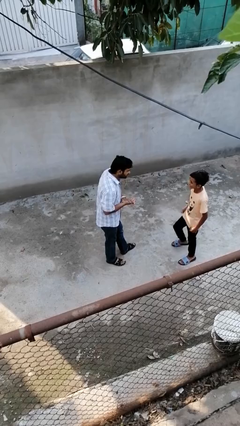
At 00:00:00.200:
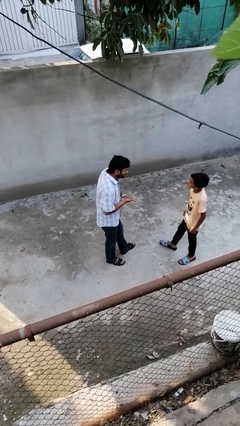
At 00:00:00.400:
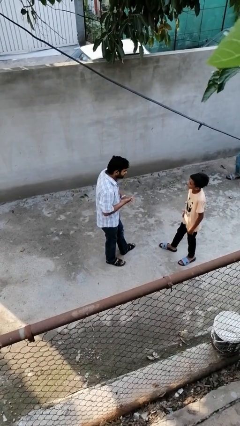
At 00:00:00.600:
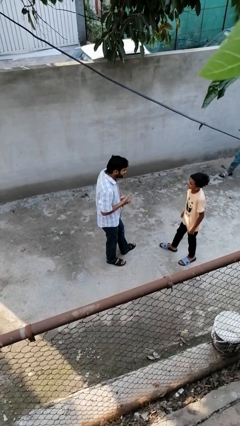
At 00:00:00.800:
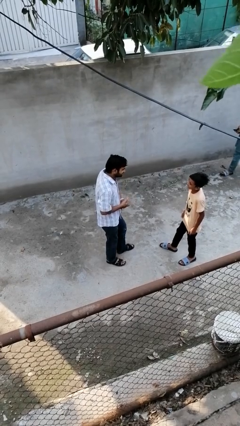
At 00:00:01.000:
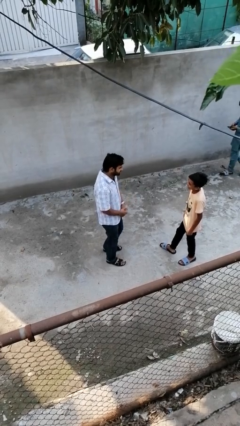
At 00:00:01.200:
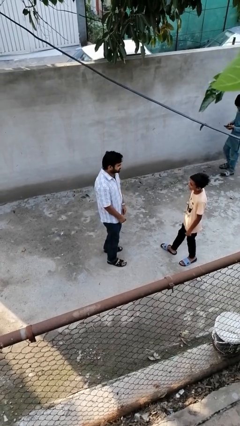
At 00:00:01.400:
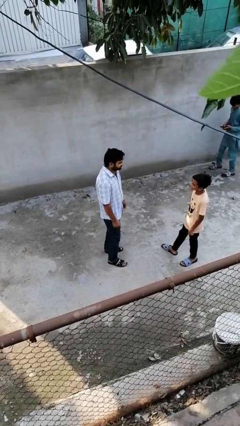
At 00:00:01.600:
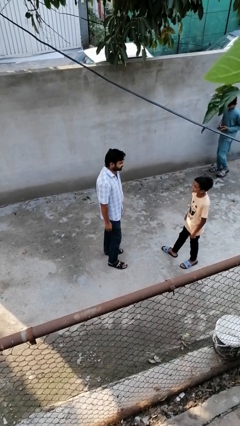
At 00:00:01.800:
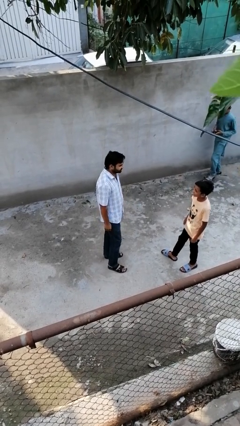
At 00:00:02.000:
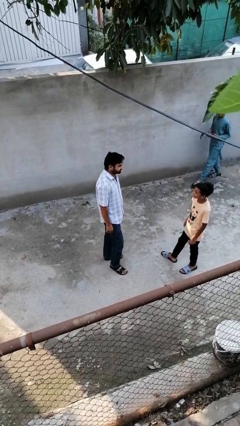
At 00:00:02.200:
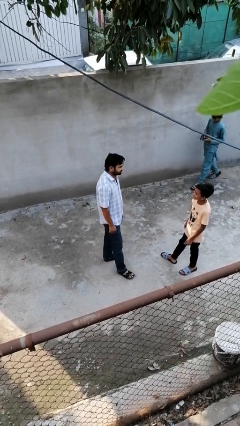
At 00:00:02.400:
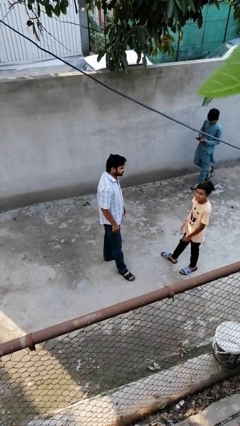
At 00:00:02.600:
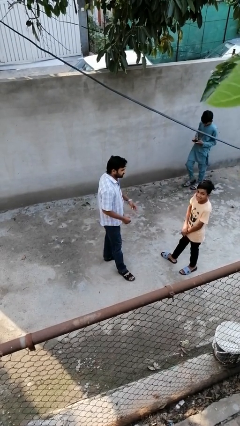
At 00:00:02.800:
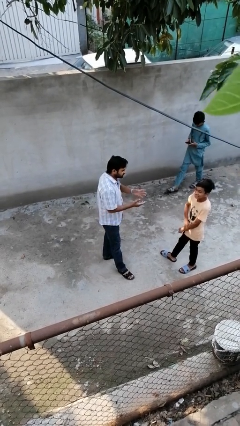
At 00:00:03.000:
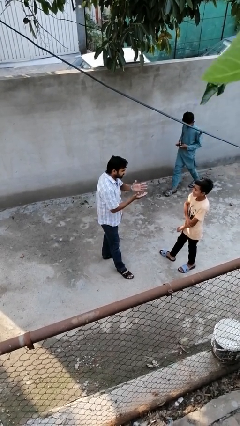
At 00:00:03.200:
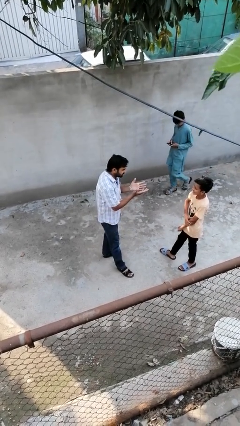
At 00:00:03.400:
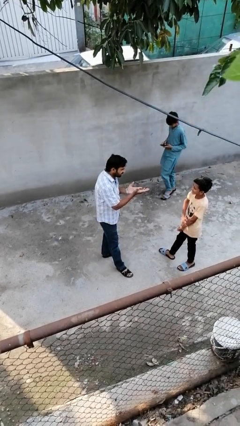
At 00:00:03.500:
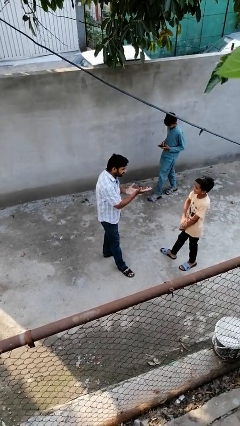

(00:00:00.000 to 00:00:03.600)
person talks to person

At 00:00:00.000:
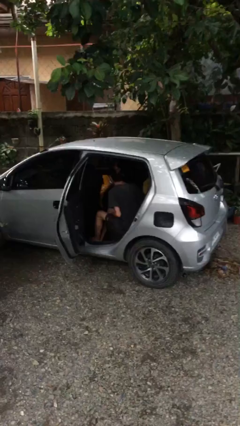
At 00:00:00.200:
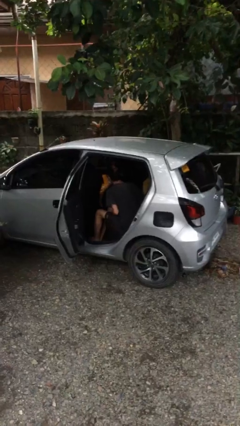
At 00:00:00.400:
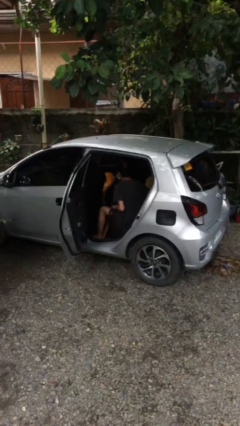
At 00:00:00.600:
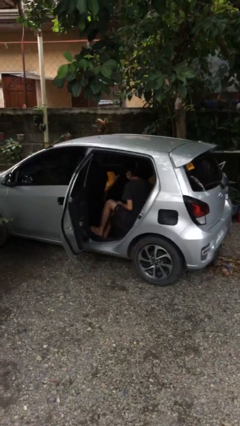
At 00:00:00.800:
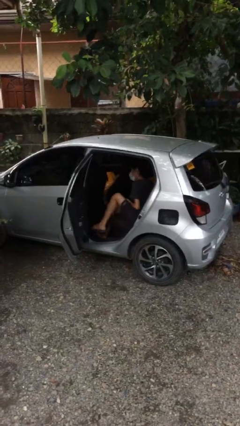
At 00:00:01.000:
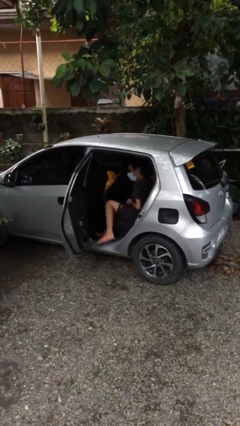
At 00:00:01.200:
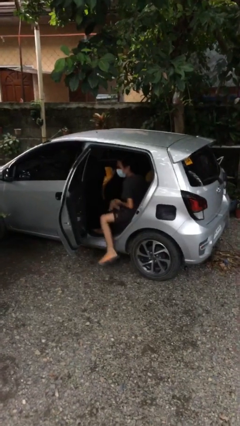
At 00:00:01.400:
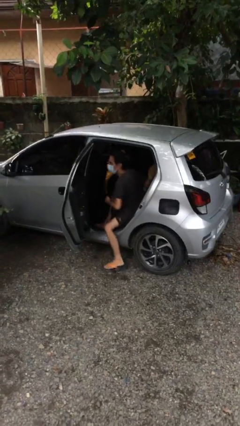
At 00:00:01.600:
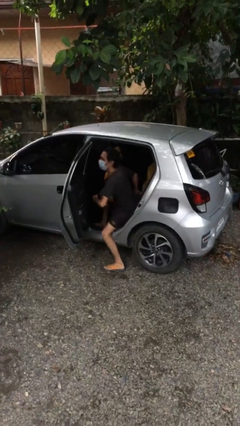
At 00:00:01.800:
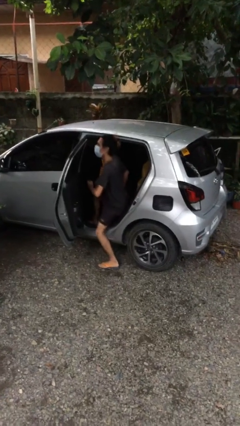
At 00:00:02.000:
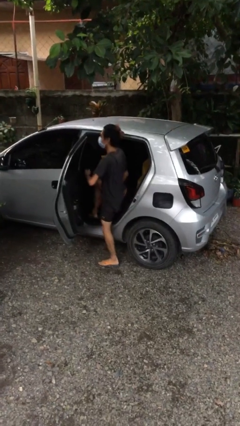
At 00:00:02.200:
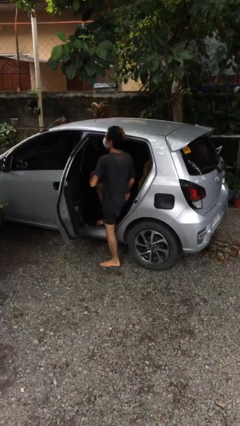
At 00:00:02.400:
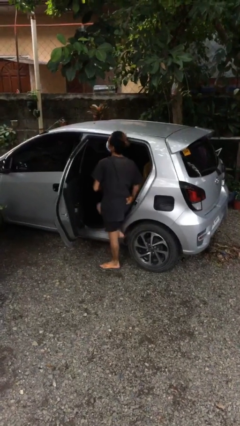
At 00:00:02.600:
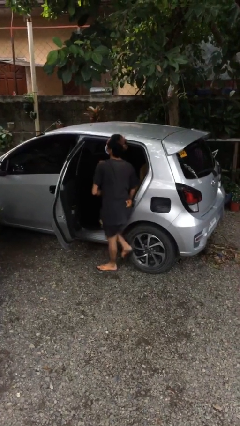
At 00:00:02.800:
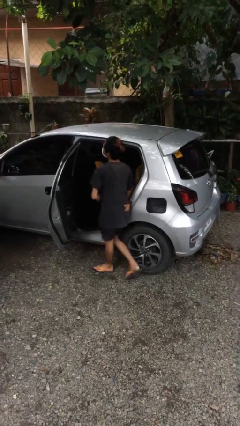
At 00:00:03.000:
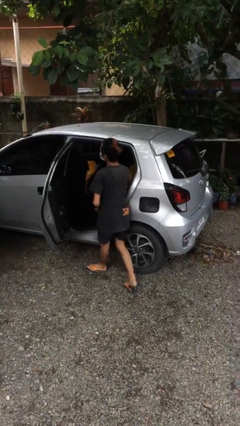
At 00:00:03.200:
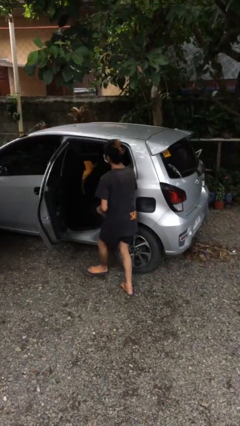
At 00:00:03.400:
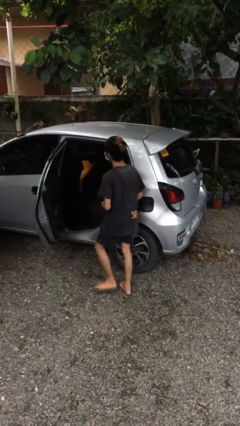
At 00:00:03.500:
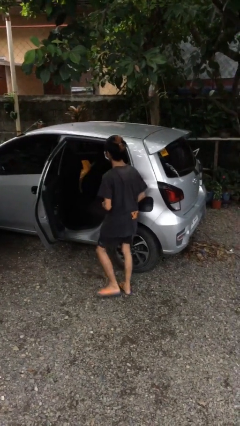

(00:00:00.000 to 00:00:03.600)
person exits car

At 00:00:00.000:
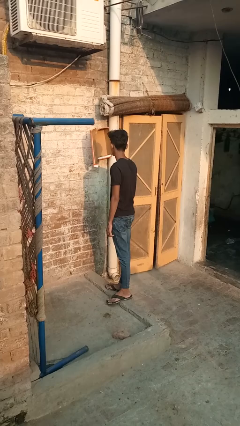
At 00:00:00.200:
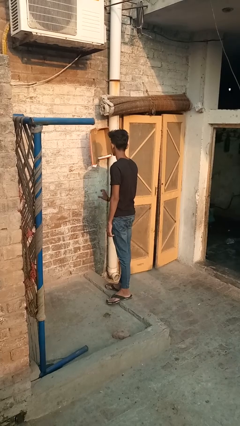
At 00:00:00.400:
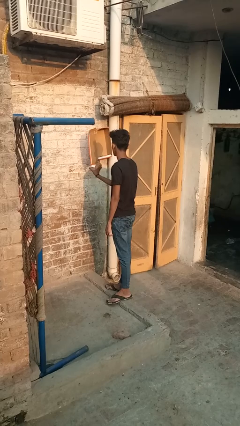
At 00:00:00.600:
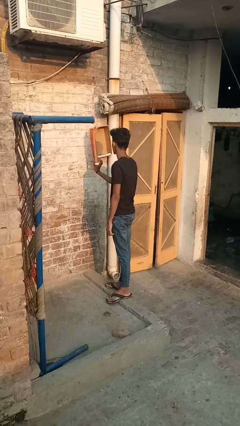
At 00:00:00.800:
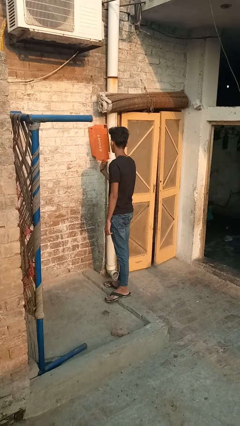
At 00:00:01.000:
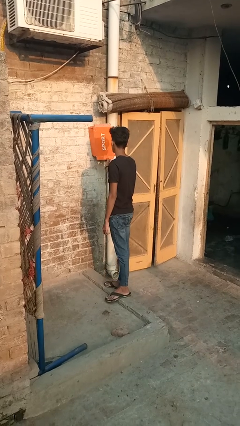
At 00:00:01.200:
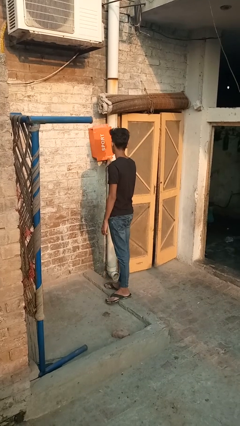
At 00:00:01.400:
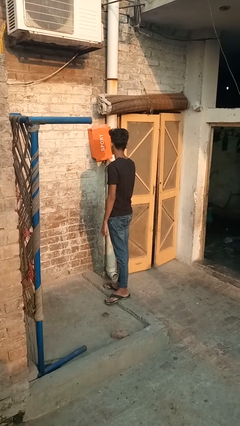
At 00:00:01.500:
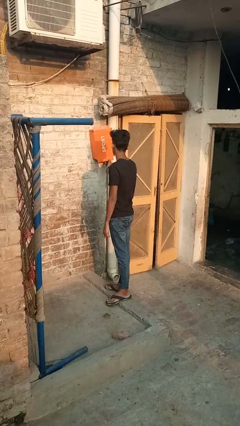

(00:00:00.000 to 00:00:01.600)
person opens mailbox

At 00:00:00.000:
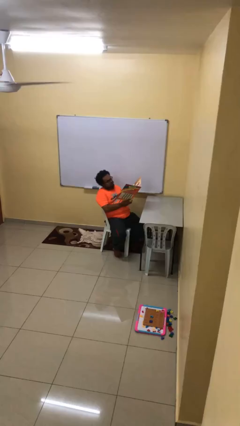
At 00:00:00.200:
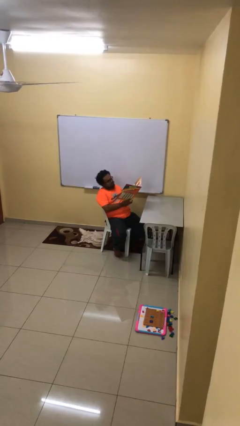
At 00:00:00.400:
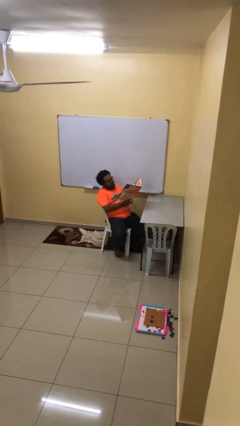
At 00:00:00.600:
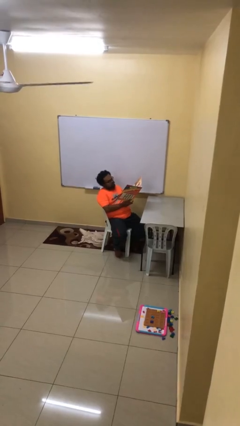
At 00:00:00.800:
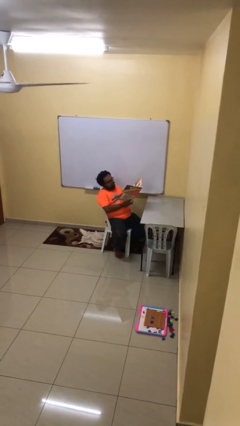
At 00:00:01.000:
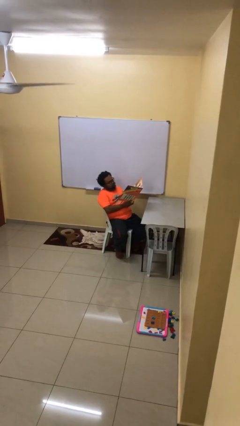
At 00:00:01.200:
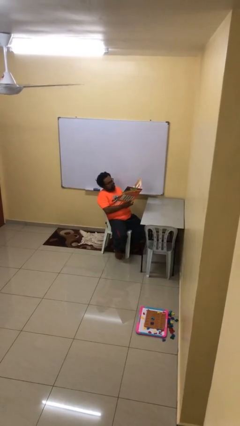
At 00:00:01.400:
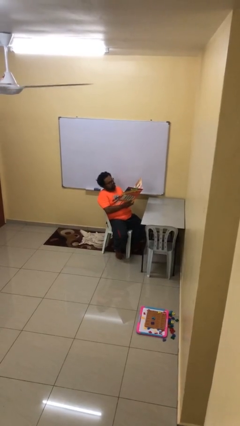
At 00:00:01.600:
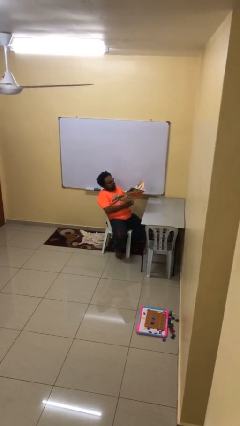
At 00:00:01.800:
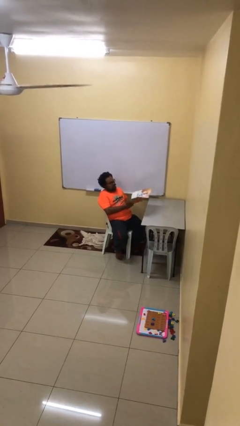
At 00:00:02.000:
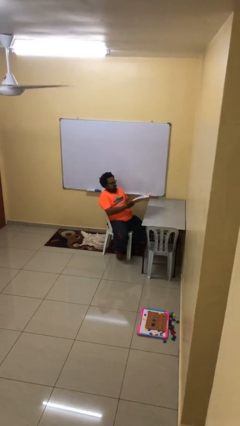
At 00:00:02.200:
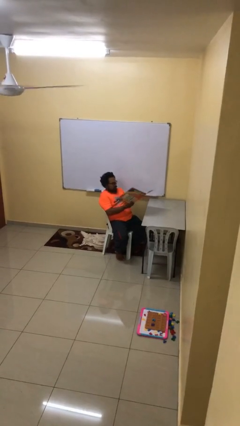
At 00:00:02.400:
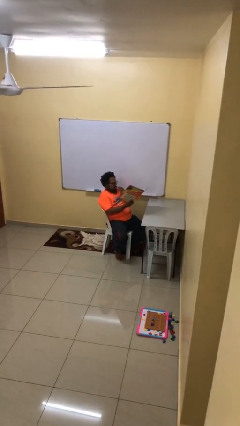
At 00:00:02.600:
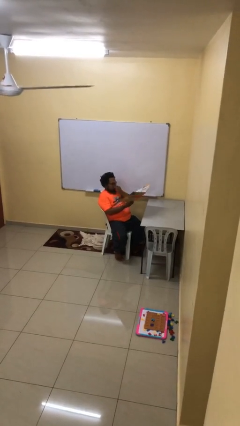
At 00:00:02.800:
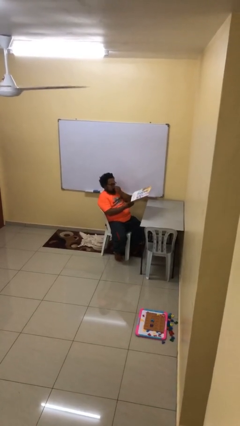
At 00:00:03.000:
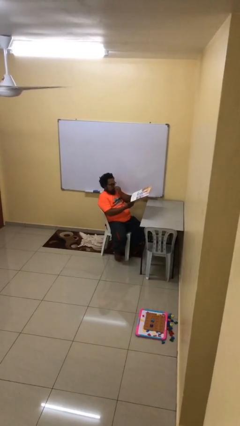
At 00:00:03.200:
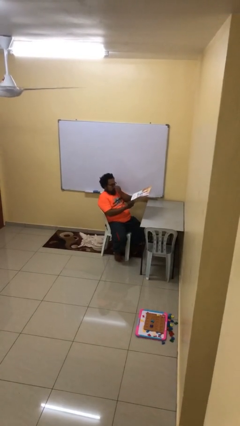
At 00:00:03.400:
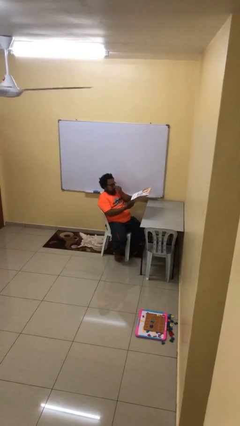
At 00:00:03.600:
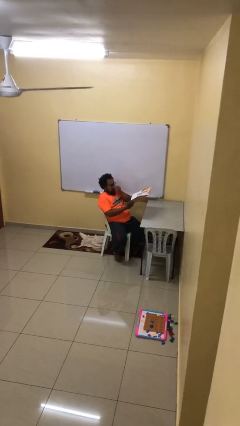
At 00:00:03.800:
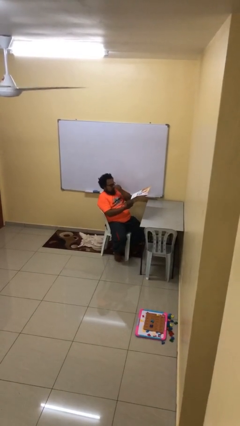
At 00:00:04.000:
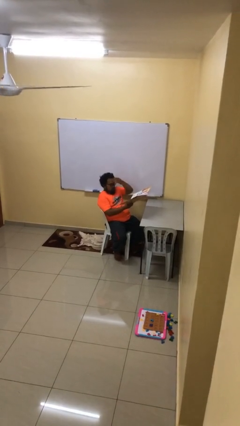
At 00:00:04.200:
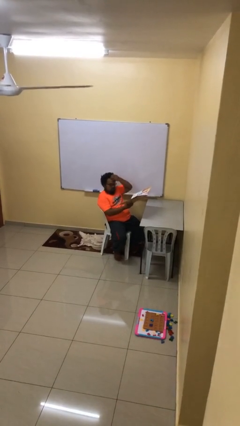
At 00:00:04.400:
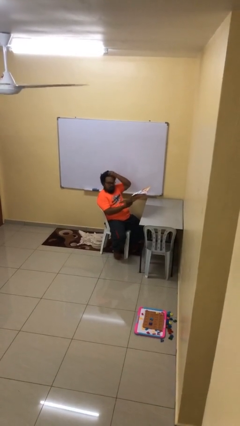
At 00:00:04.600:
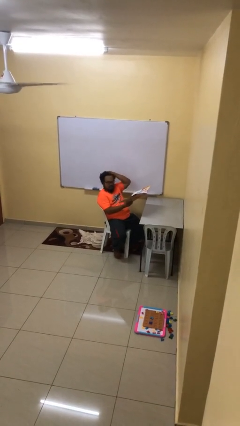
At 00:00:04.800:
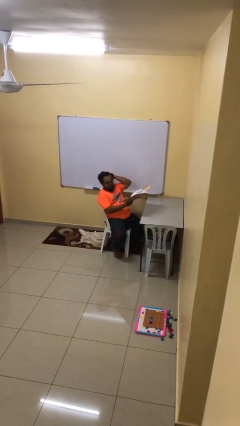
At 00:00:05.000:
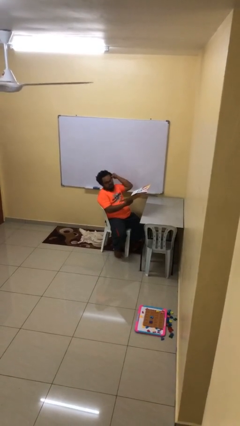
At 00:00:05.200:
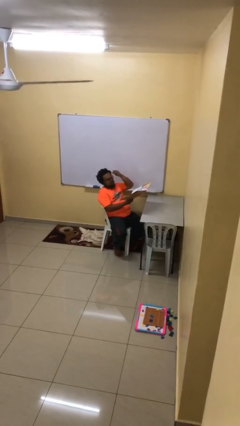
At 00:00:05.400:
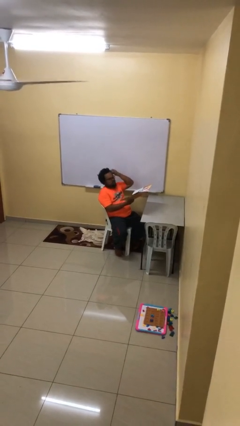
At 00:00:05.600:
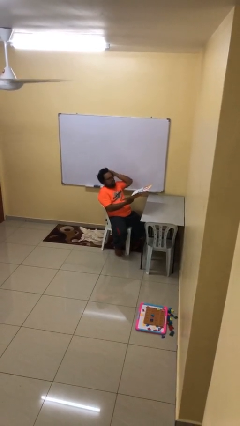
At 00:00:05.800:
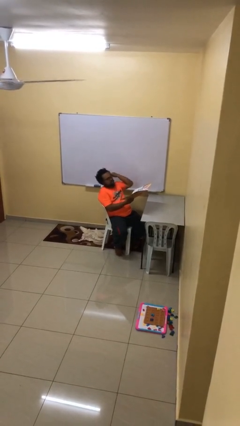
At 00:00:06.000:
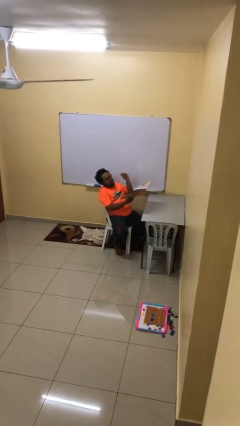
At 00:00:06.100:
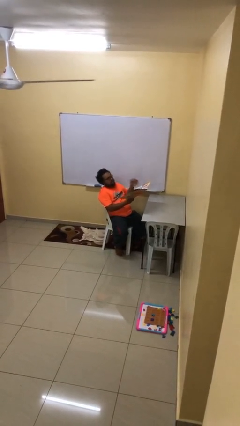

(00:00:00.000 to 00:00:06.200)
person reads document

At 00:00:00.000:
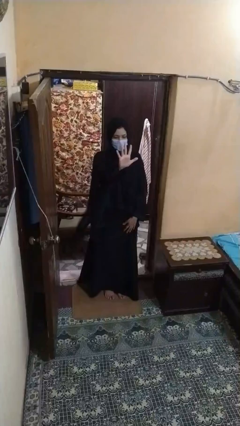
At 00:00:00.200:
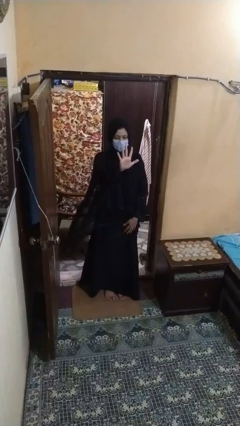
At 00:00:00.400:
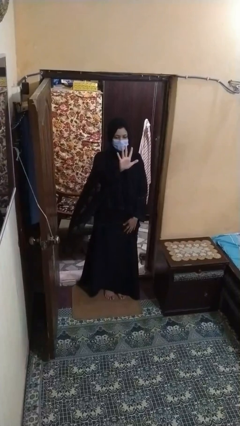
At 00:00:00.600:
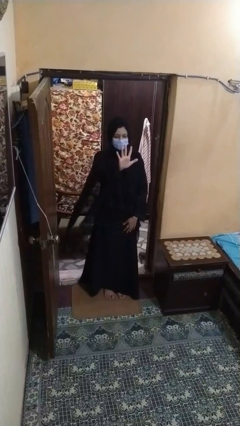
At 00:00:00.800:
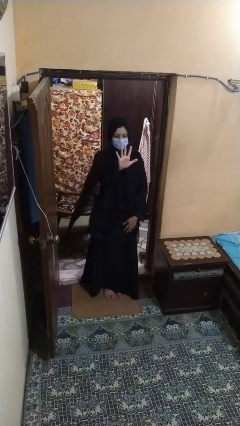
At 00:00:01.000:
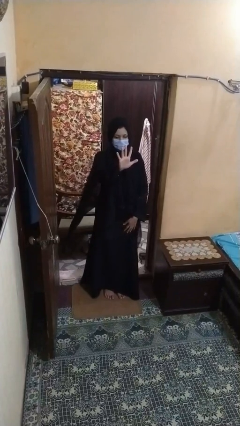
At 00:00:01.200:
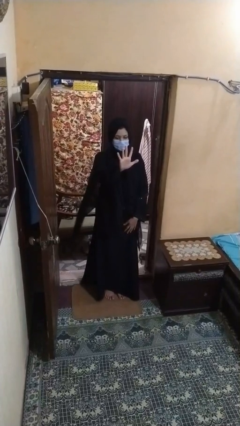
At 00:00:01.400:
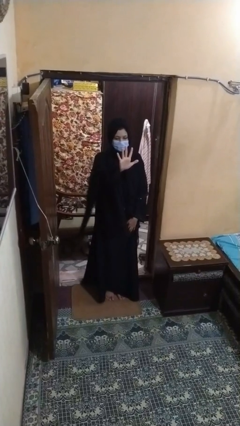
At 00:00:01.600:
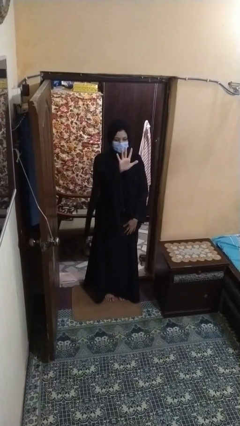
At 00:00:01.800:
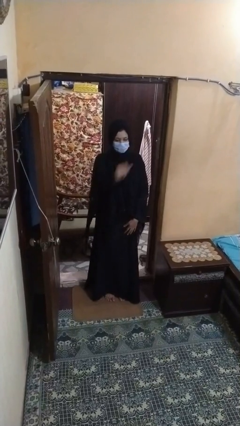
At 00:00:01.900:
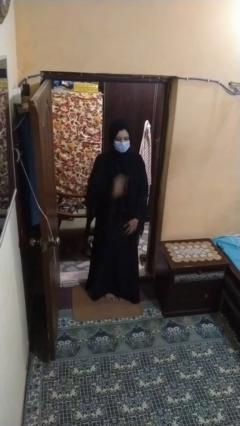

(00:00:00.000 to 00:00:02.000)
person gestures number five

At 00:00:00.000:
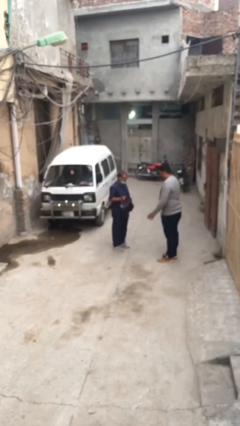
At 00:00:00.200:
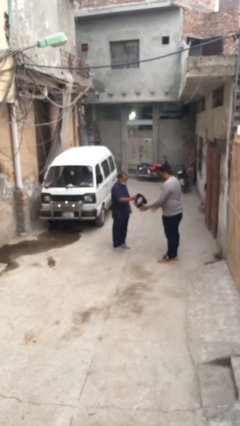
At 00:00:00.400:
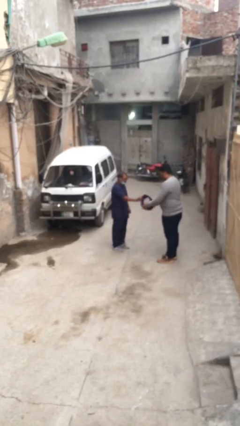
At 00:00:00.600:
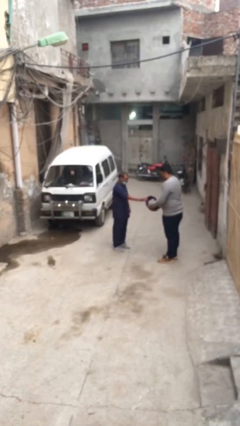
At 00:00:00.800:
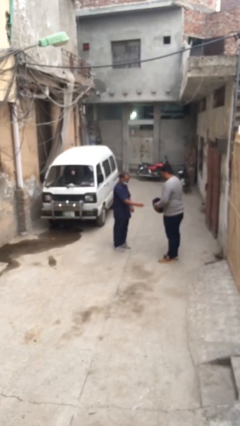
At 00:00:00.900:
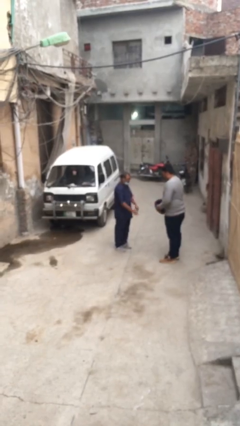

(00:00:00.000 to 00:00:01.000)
person transfers object to person
